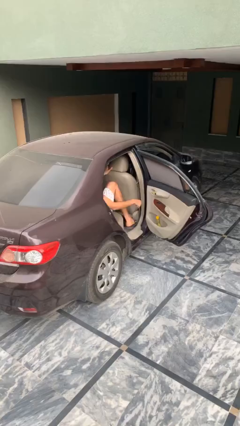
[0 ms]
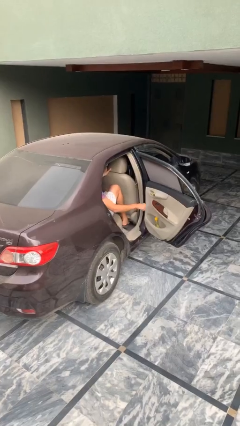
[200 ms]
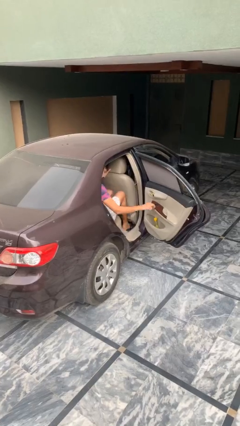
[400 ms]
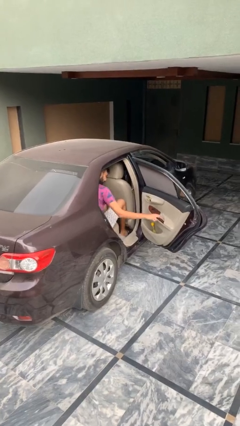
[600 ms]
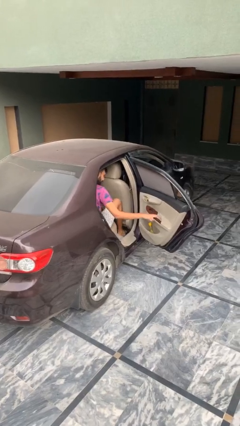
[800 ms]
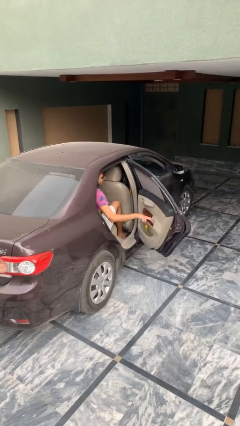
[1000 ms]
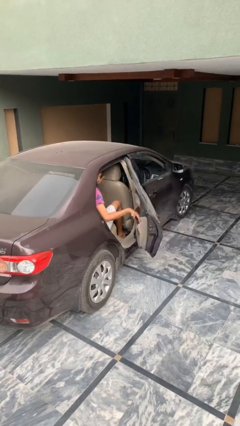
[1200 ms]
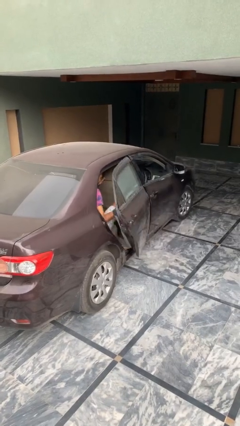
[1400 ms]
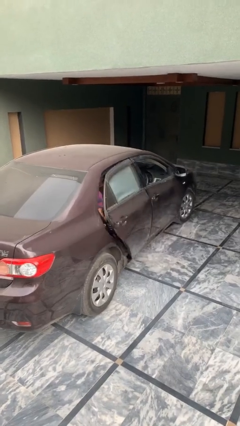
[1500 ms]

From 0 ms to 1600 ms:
person closes car door

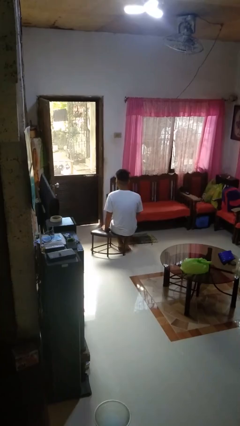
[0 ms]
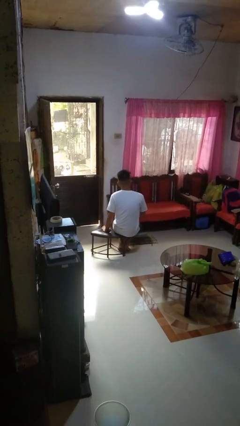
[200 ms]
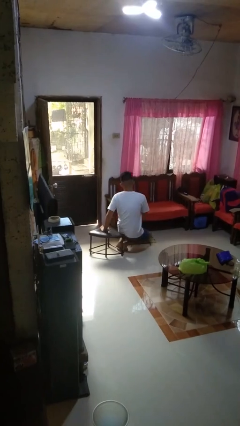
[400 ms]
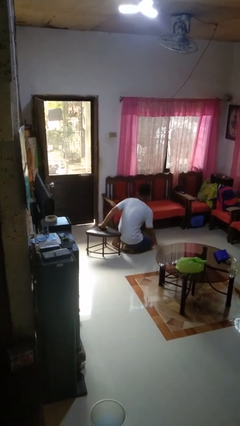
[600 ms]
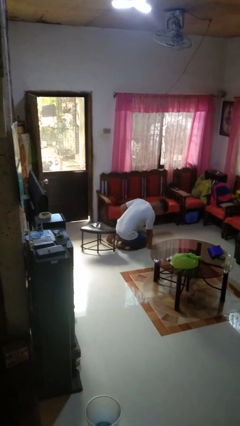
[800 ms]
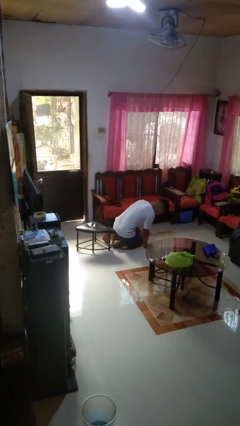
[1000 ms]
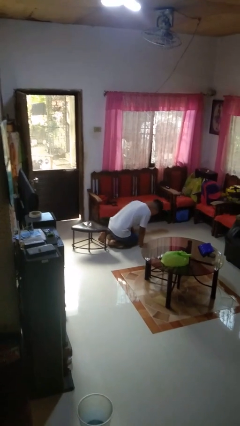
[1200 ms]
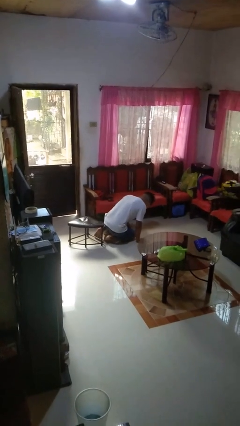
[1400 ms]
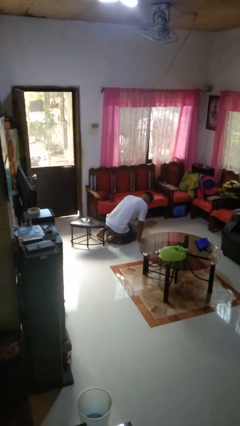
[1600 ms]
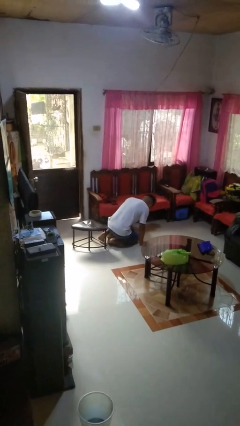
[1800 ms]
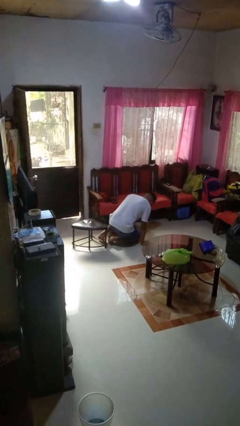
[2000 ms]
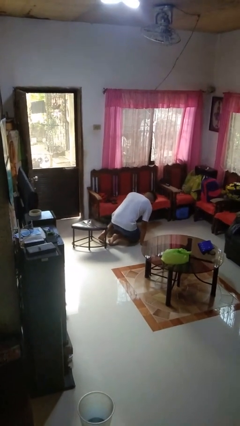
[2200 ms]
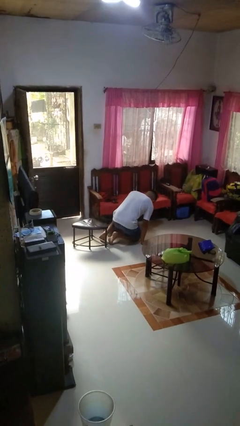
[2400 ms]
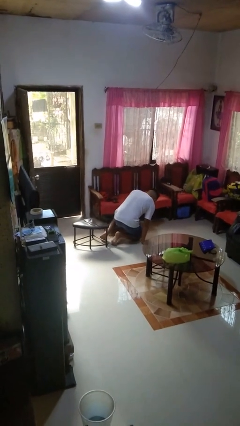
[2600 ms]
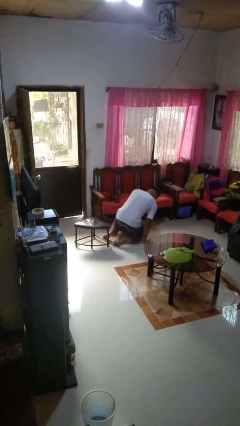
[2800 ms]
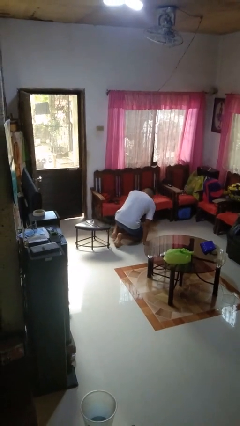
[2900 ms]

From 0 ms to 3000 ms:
person falls from chair

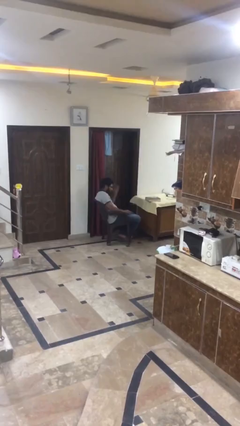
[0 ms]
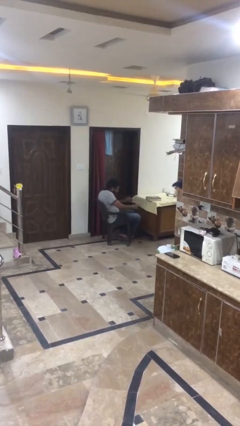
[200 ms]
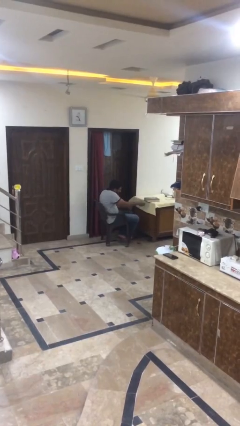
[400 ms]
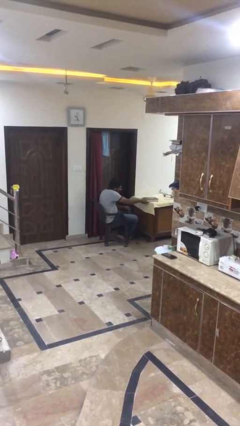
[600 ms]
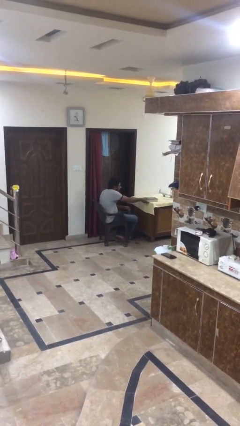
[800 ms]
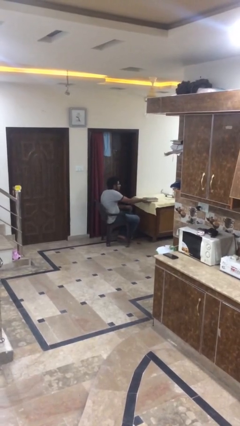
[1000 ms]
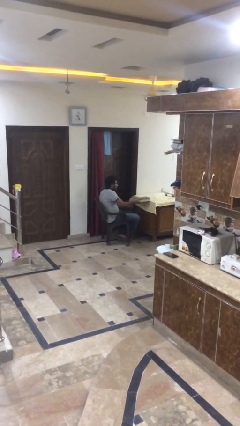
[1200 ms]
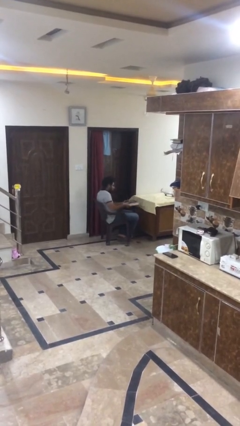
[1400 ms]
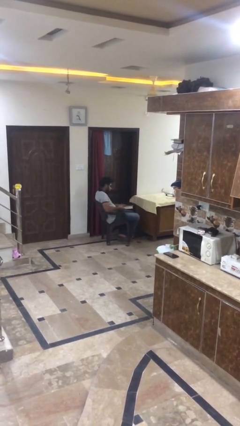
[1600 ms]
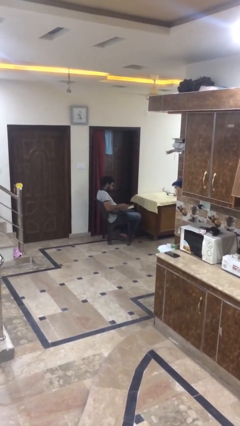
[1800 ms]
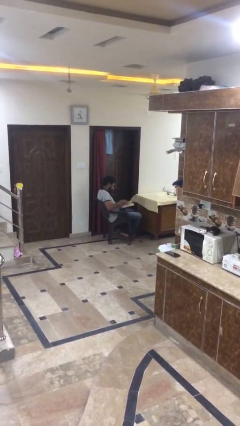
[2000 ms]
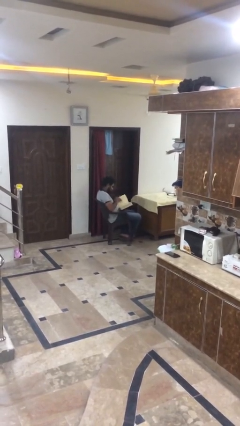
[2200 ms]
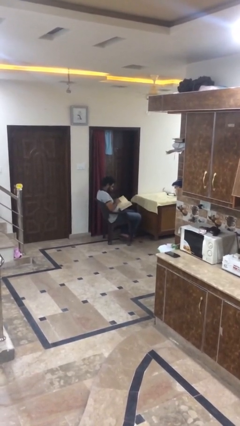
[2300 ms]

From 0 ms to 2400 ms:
person picks up object from table

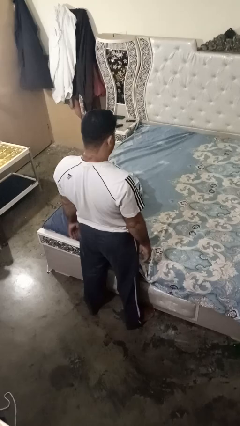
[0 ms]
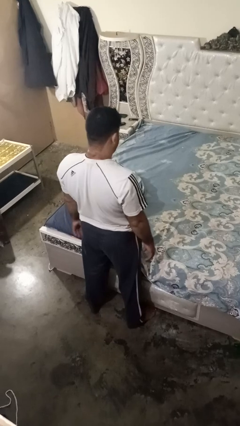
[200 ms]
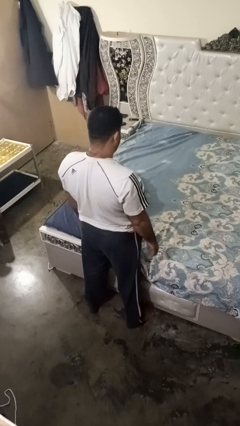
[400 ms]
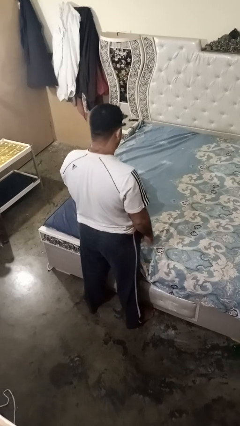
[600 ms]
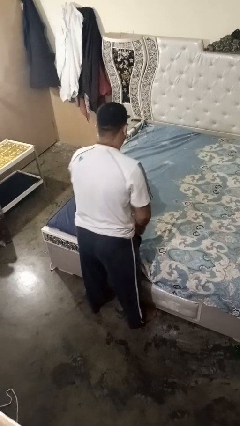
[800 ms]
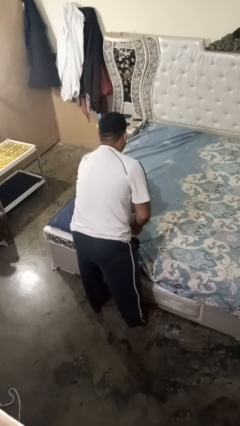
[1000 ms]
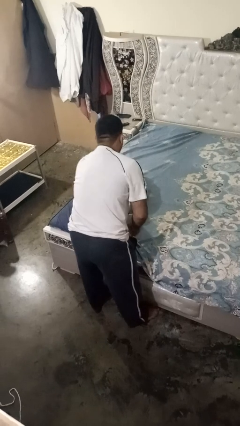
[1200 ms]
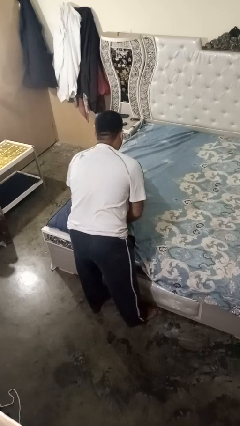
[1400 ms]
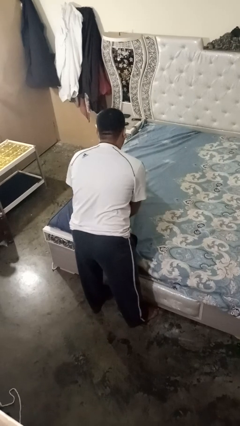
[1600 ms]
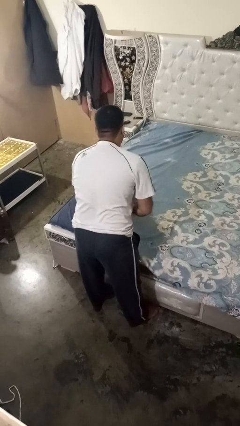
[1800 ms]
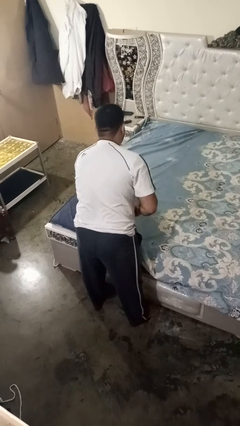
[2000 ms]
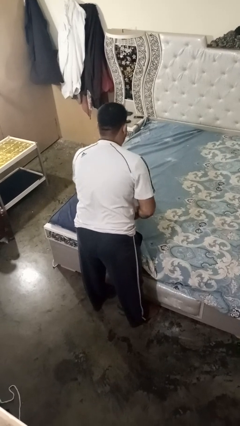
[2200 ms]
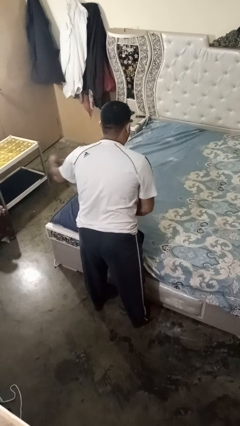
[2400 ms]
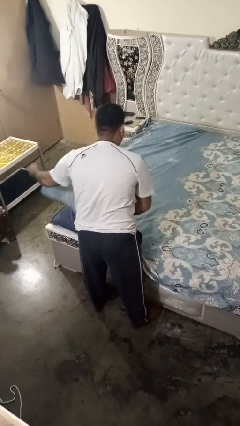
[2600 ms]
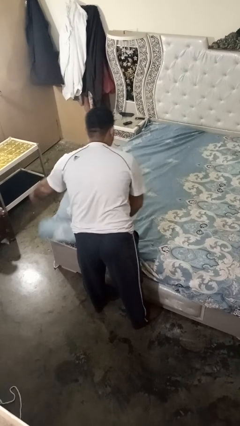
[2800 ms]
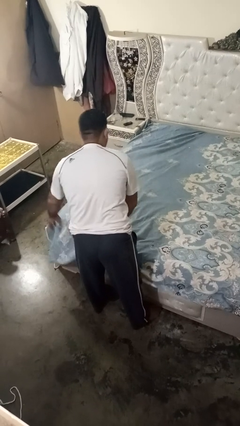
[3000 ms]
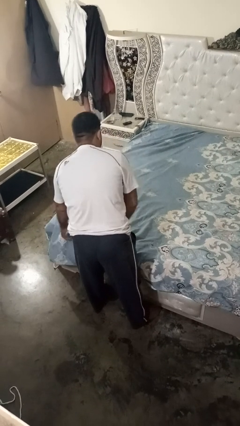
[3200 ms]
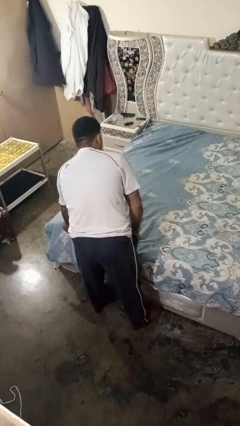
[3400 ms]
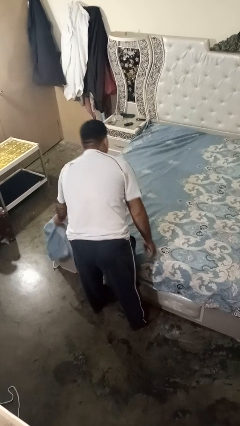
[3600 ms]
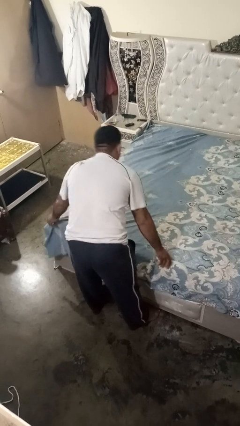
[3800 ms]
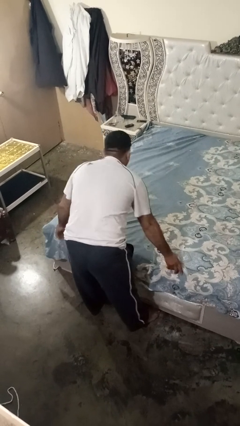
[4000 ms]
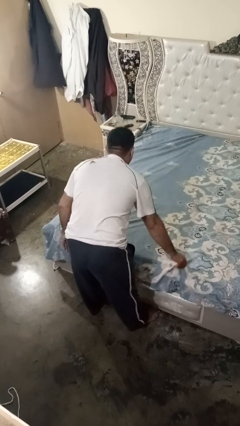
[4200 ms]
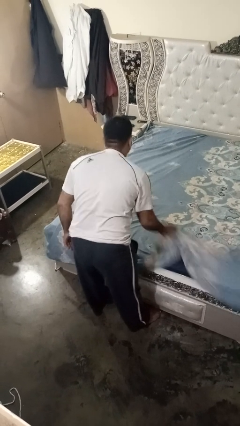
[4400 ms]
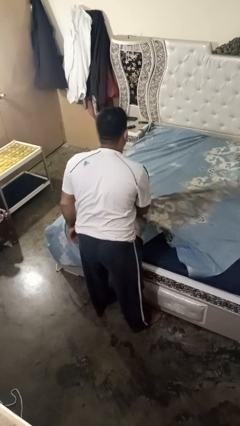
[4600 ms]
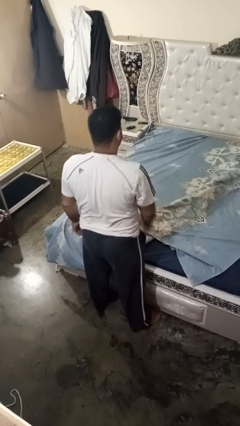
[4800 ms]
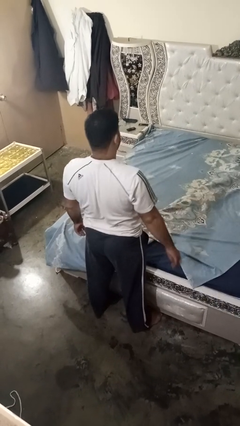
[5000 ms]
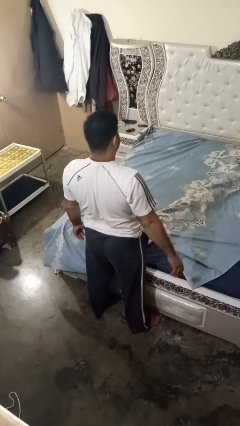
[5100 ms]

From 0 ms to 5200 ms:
person makes bed

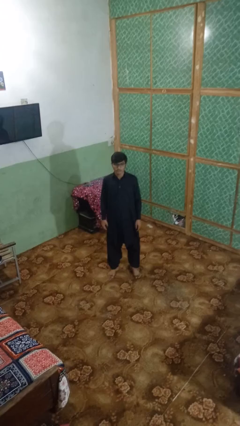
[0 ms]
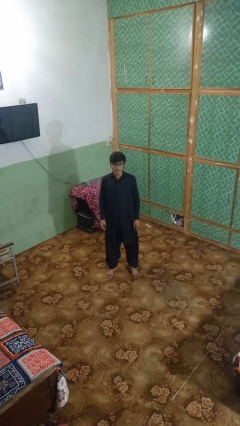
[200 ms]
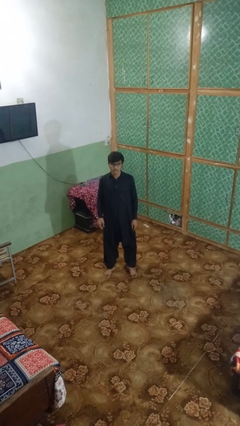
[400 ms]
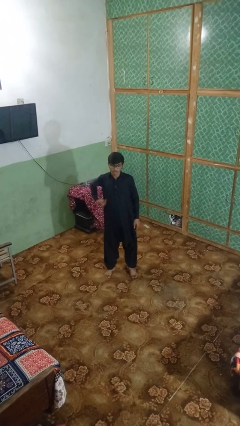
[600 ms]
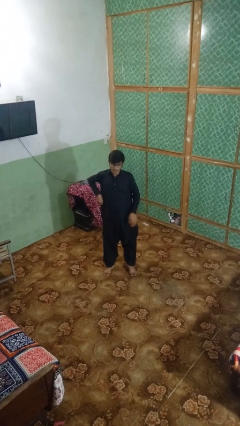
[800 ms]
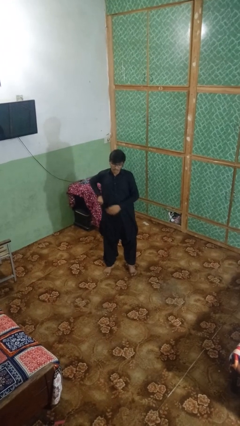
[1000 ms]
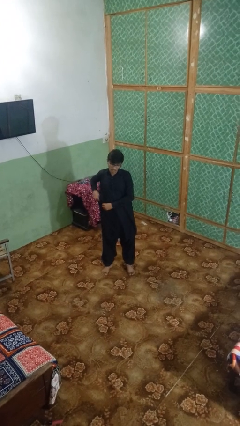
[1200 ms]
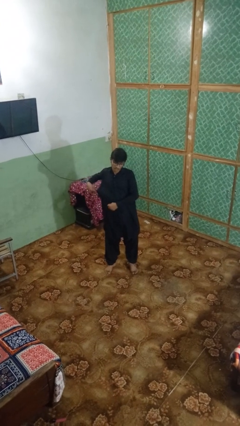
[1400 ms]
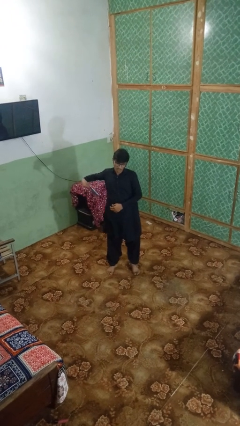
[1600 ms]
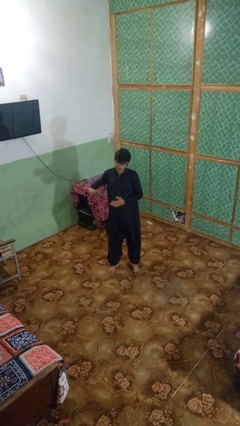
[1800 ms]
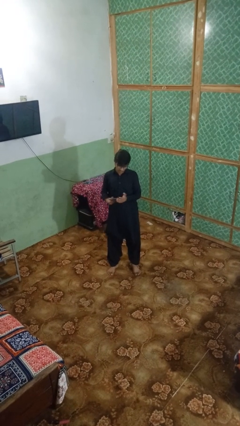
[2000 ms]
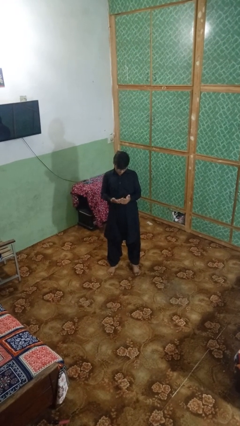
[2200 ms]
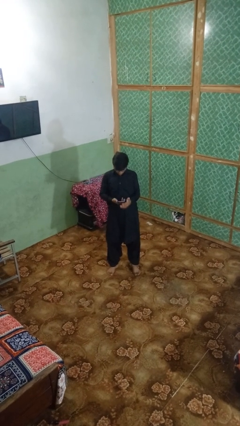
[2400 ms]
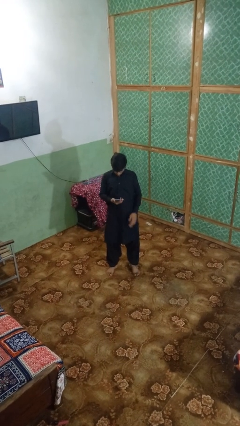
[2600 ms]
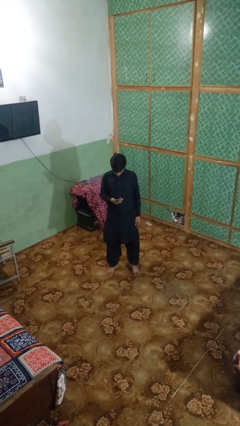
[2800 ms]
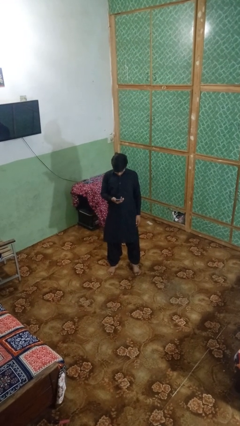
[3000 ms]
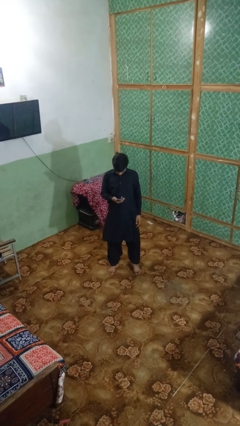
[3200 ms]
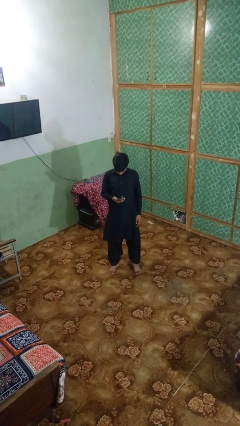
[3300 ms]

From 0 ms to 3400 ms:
person takes phone from pocket

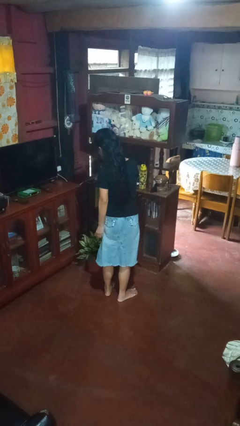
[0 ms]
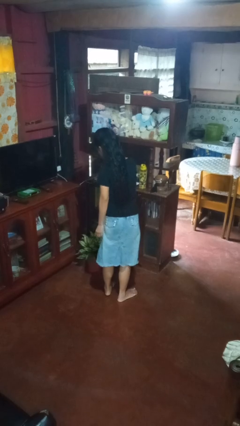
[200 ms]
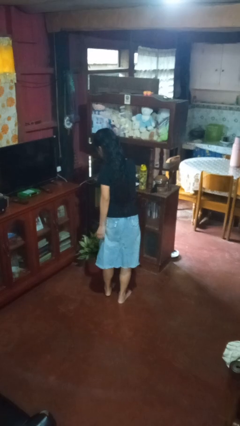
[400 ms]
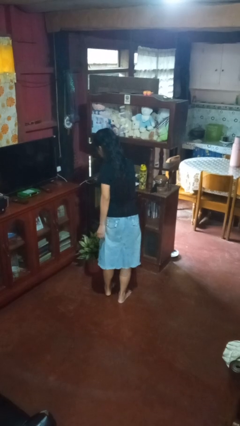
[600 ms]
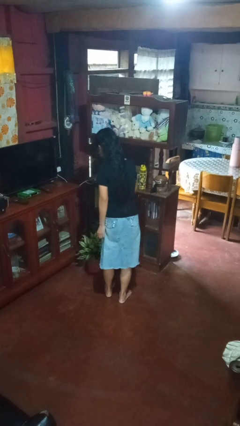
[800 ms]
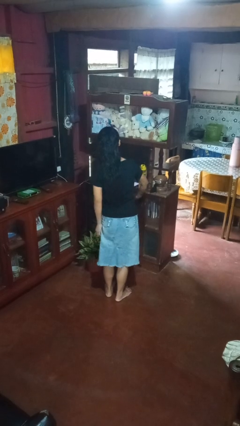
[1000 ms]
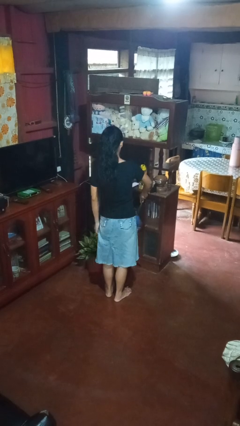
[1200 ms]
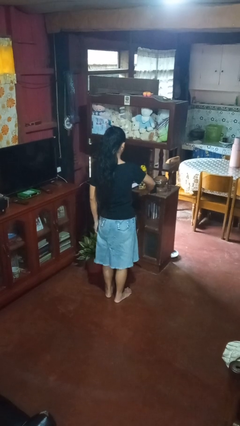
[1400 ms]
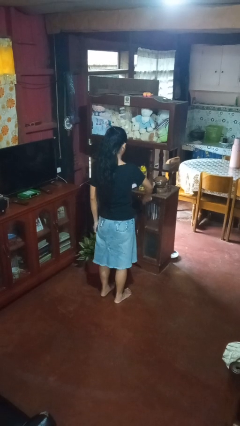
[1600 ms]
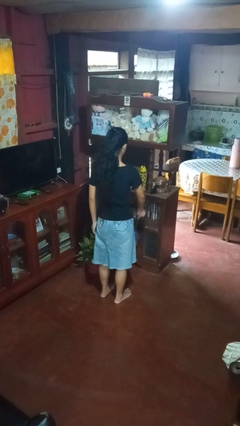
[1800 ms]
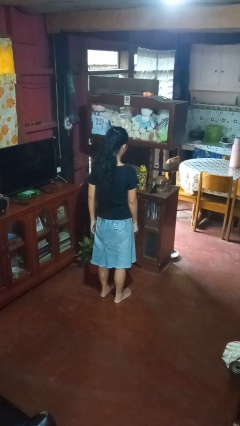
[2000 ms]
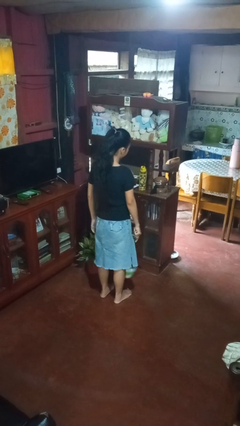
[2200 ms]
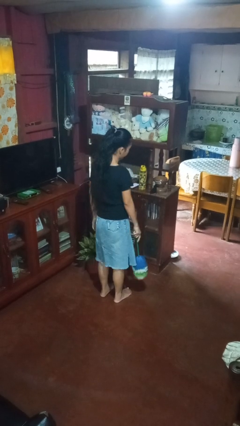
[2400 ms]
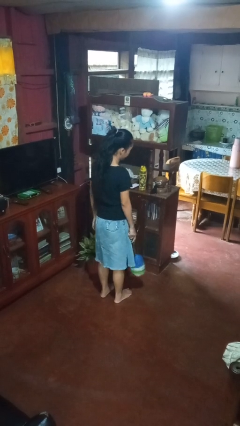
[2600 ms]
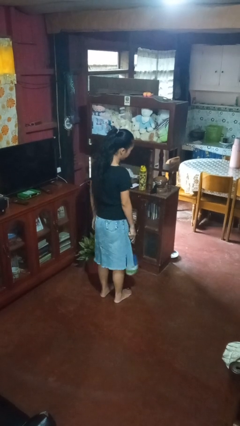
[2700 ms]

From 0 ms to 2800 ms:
person dusts furniture
